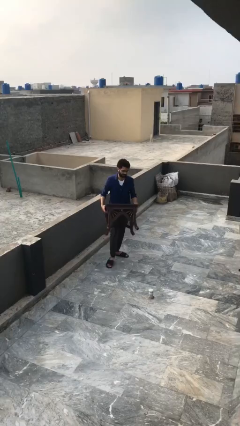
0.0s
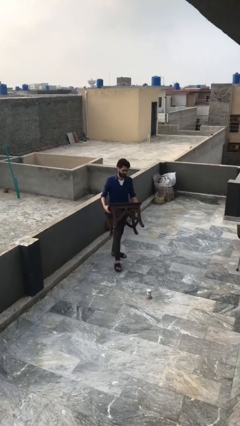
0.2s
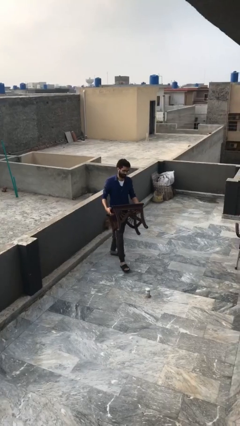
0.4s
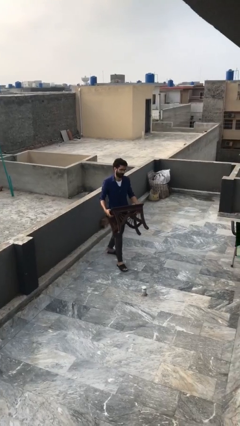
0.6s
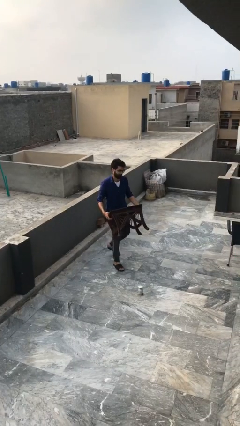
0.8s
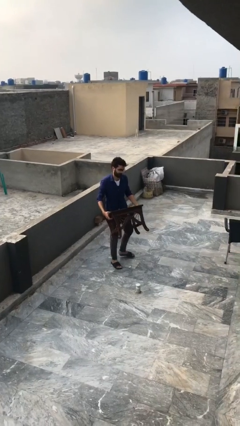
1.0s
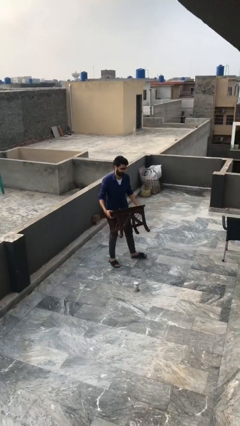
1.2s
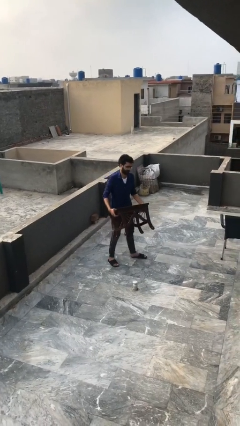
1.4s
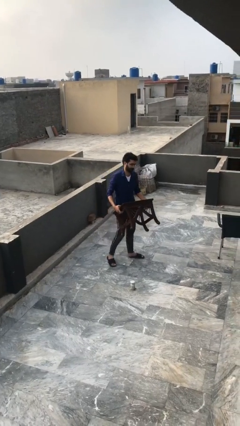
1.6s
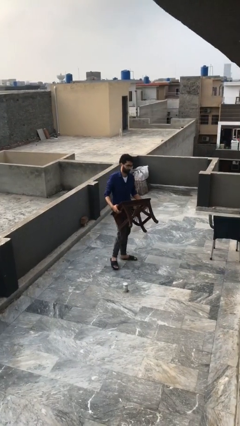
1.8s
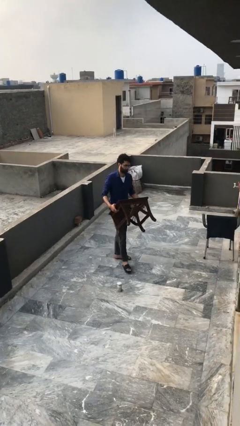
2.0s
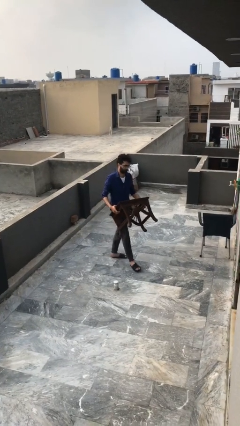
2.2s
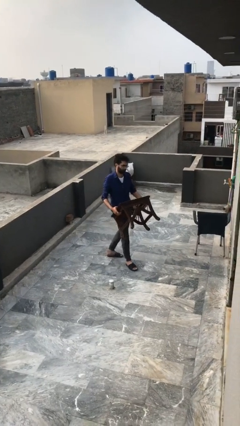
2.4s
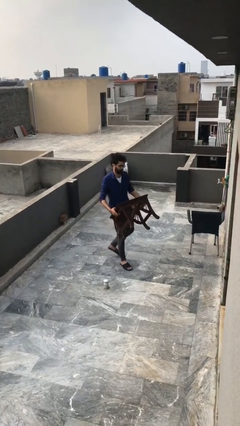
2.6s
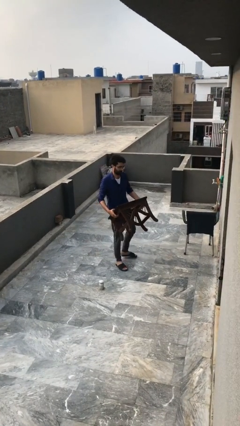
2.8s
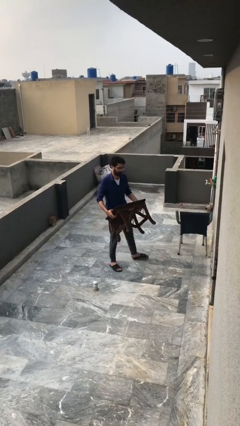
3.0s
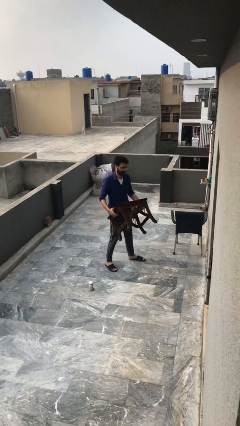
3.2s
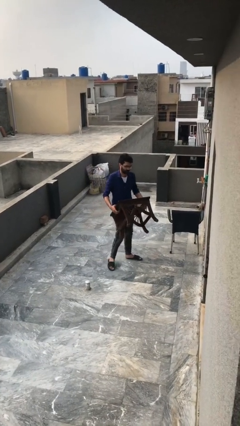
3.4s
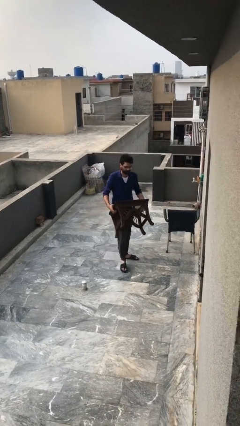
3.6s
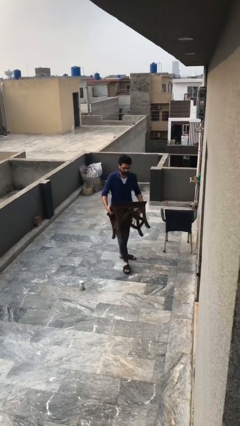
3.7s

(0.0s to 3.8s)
person carries heavy object

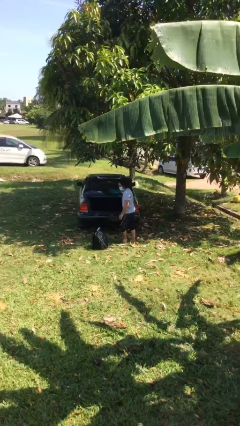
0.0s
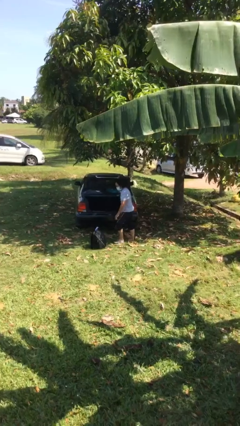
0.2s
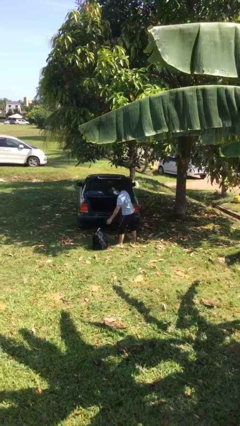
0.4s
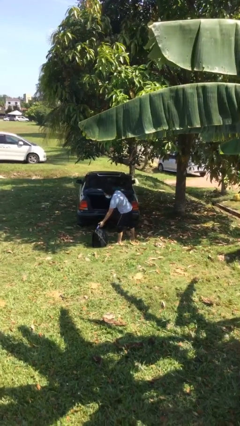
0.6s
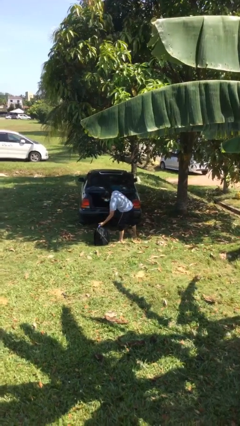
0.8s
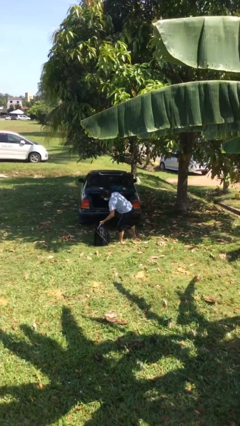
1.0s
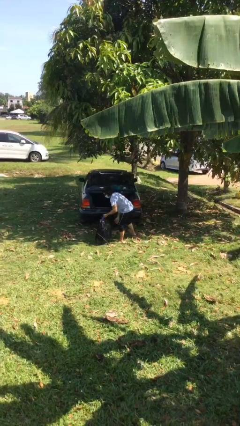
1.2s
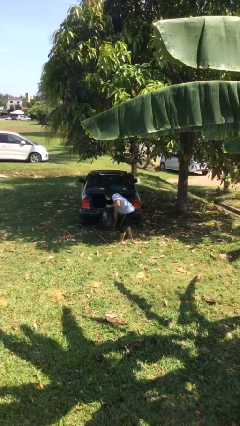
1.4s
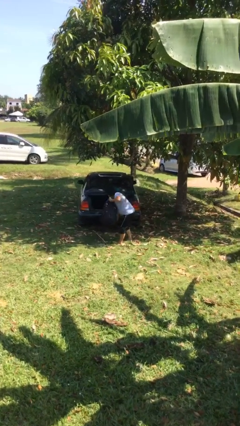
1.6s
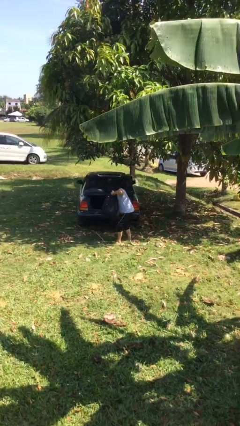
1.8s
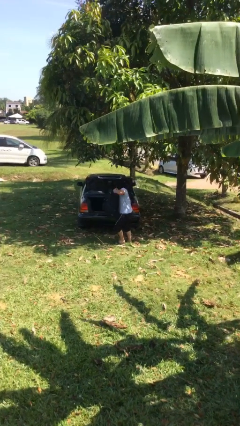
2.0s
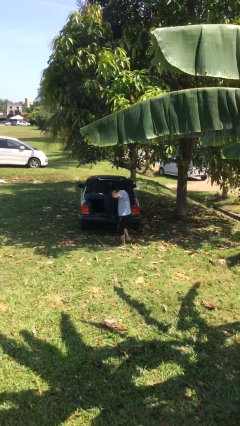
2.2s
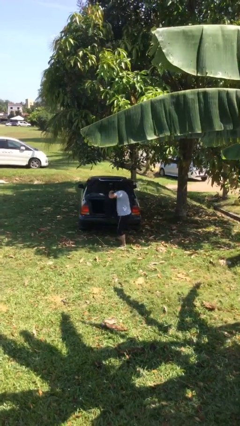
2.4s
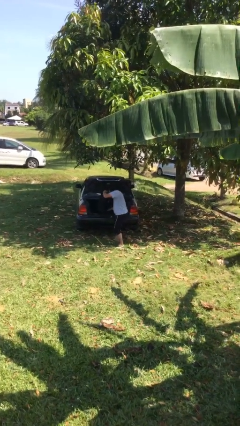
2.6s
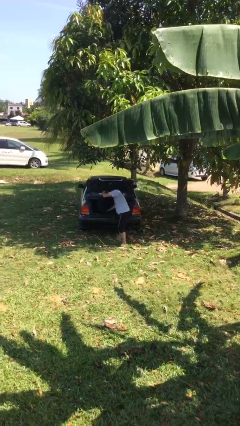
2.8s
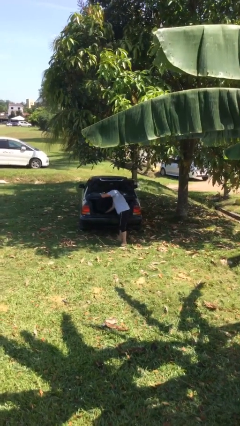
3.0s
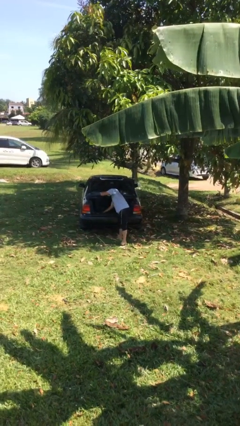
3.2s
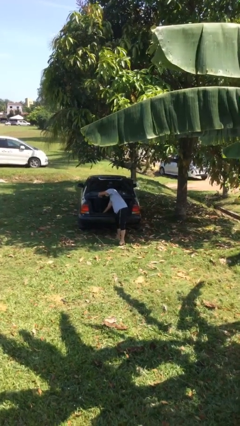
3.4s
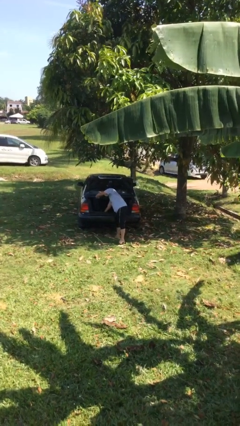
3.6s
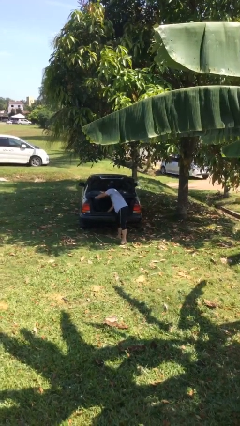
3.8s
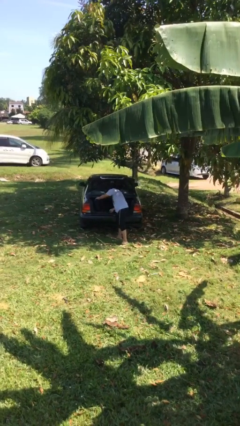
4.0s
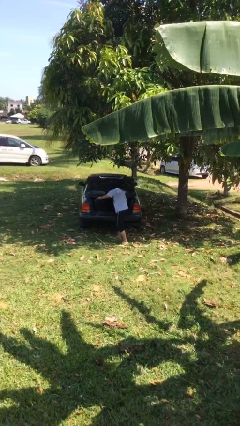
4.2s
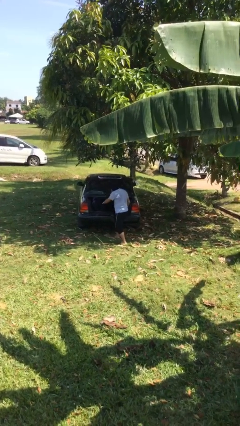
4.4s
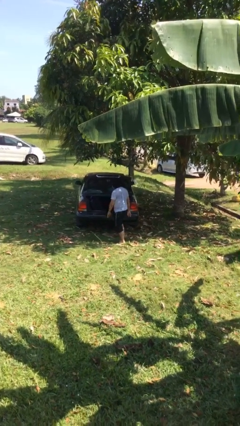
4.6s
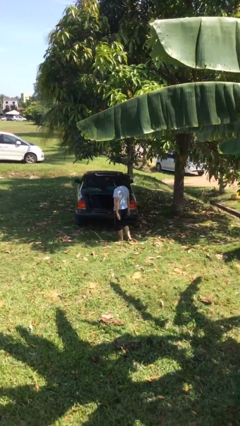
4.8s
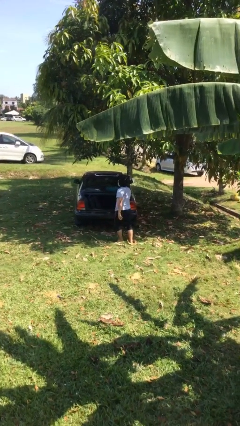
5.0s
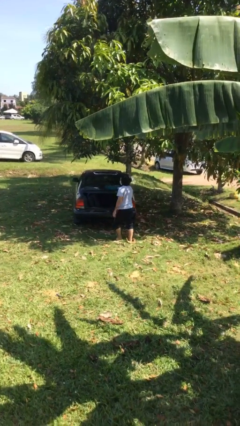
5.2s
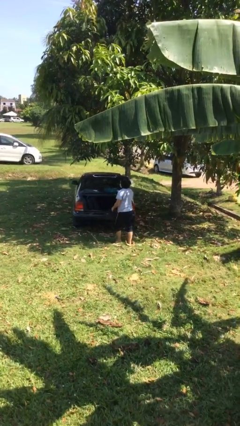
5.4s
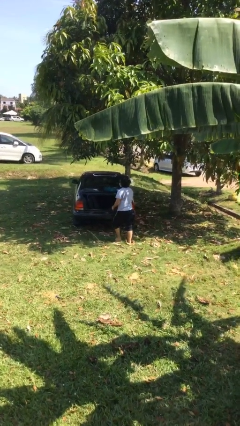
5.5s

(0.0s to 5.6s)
person loads car

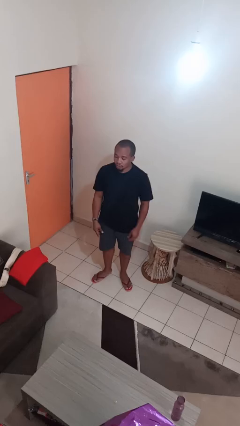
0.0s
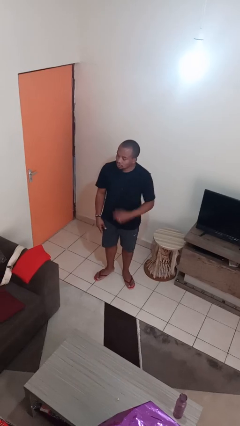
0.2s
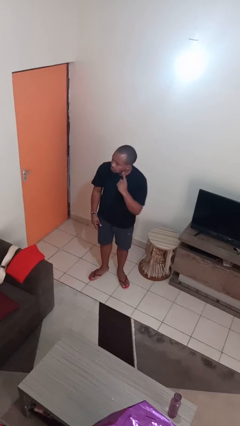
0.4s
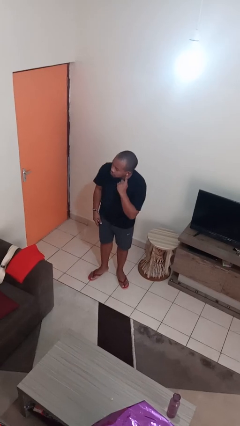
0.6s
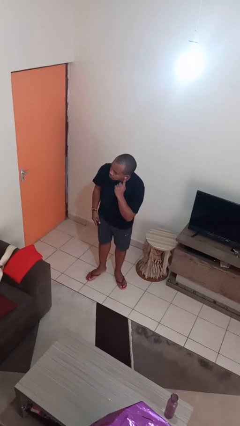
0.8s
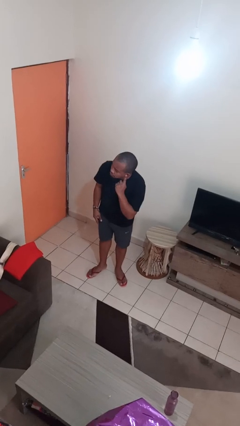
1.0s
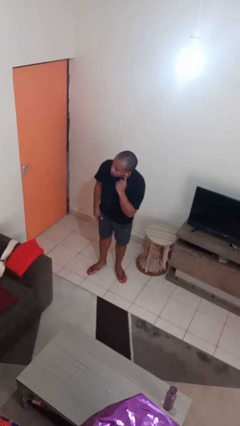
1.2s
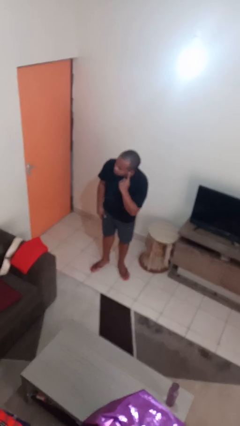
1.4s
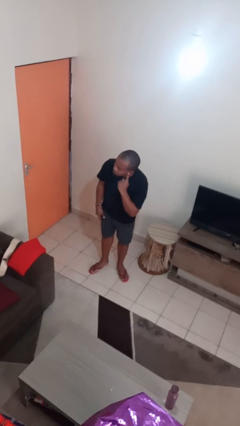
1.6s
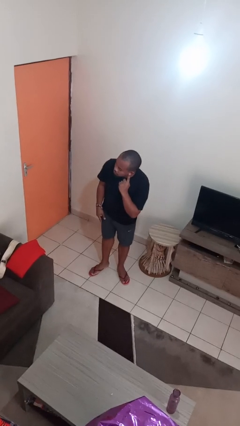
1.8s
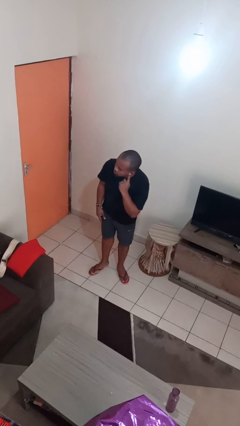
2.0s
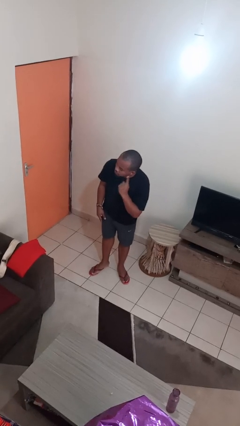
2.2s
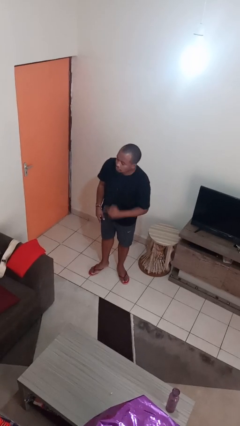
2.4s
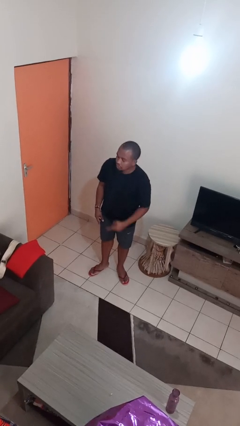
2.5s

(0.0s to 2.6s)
person gestures listen closely

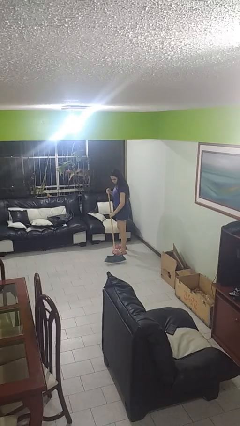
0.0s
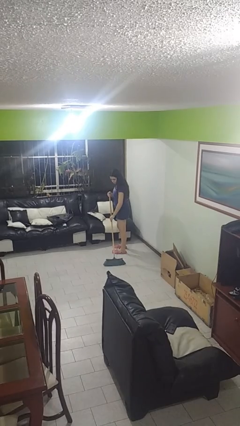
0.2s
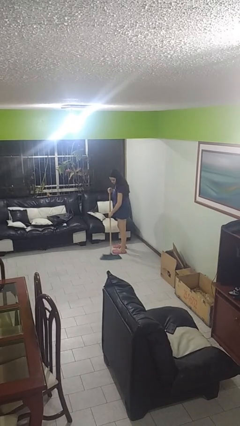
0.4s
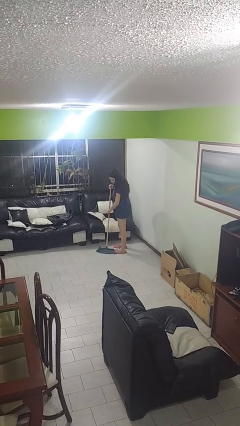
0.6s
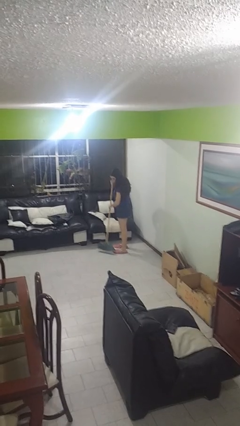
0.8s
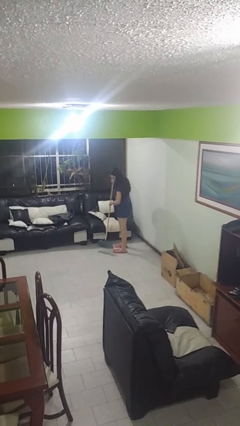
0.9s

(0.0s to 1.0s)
person sweeps floor

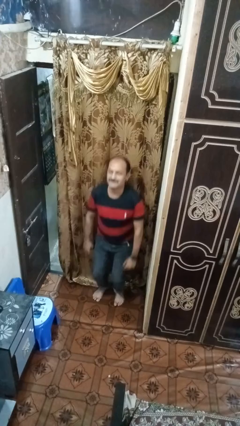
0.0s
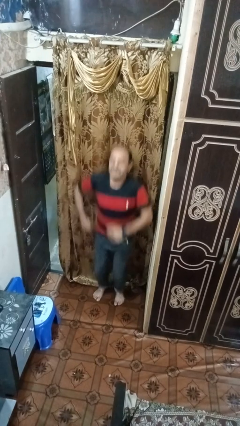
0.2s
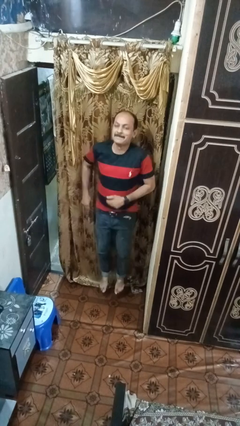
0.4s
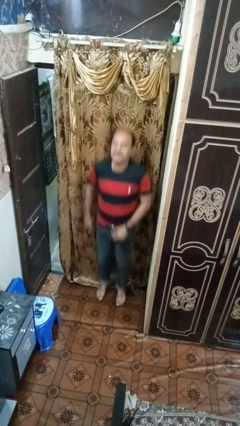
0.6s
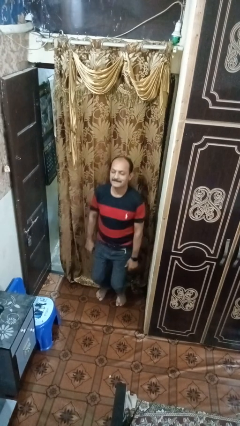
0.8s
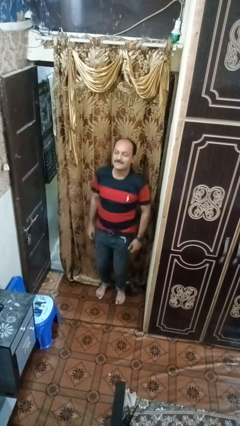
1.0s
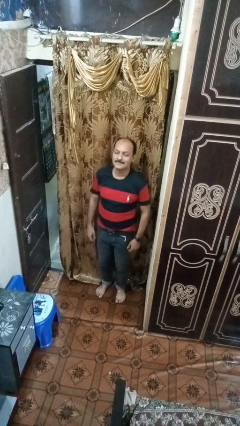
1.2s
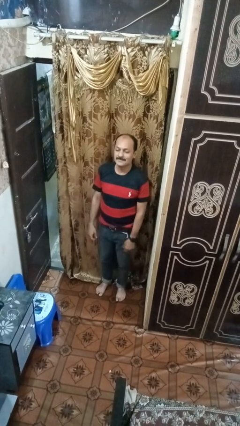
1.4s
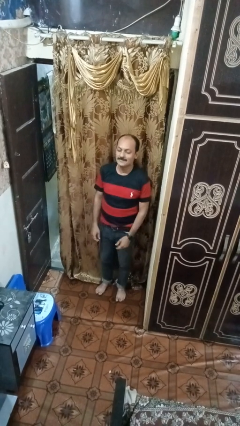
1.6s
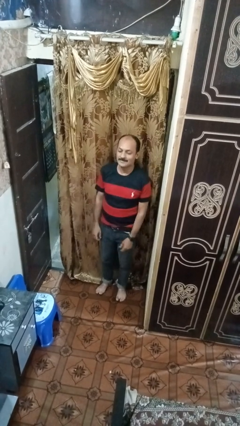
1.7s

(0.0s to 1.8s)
person jumps

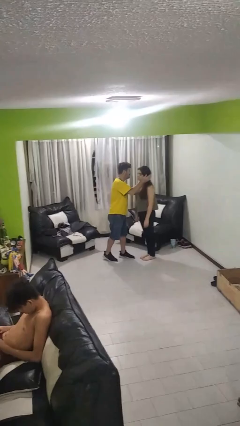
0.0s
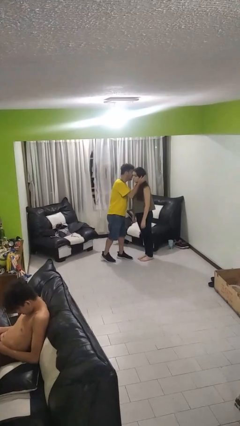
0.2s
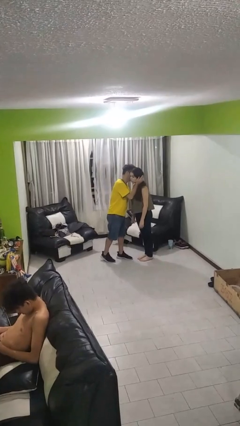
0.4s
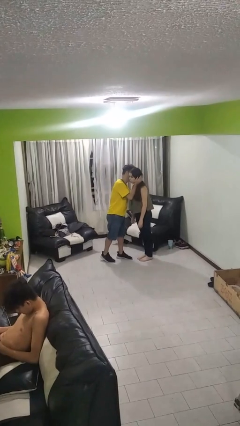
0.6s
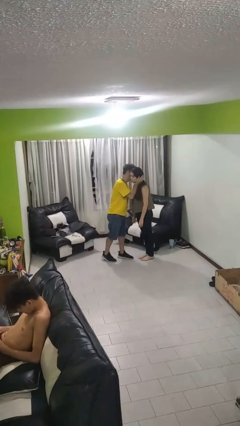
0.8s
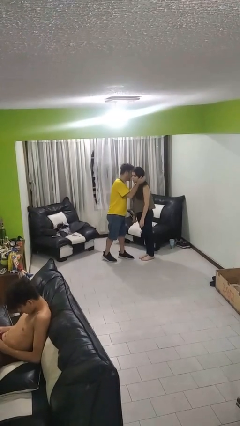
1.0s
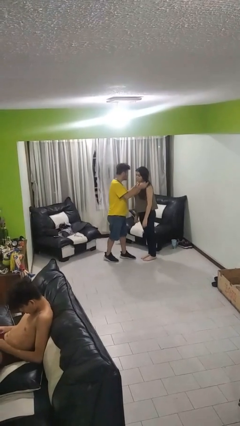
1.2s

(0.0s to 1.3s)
person kisses cheek of person

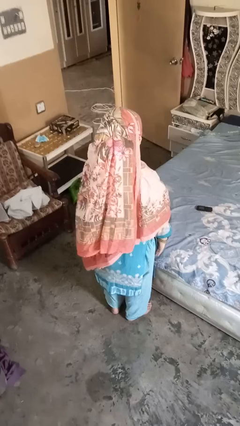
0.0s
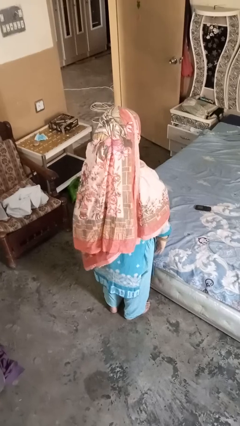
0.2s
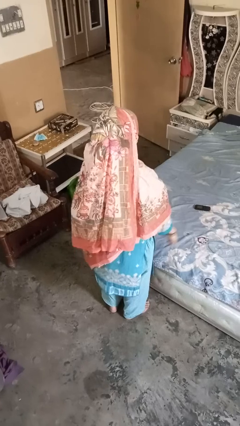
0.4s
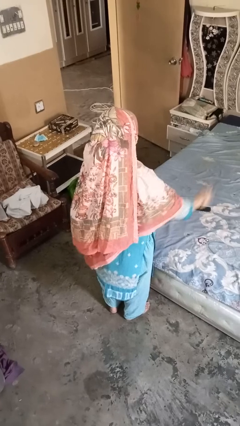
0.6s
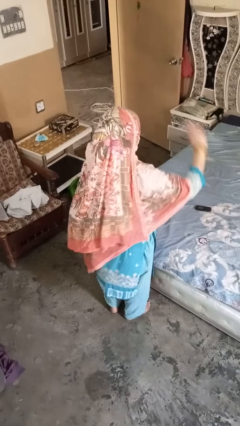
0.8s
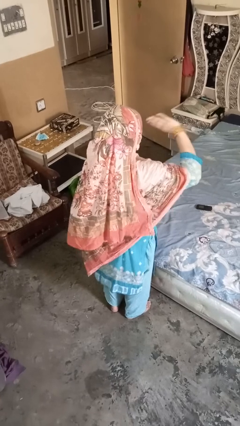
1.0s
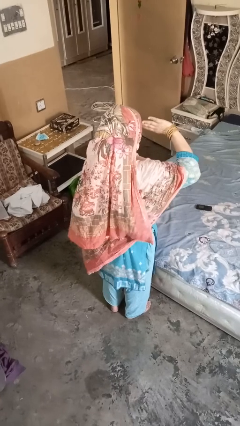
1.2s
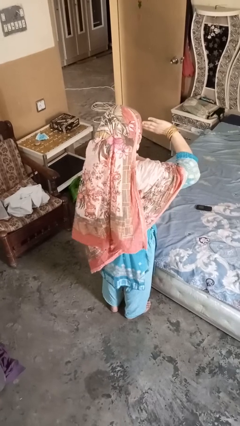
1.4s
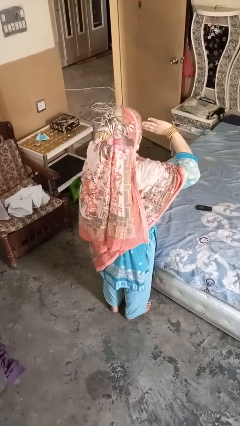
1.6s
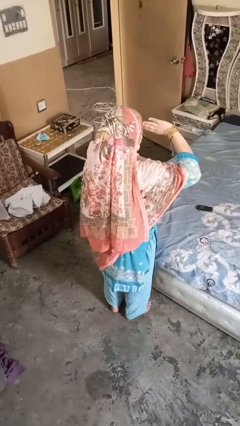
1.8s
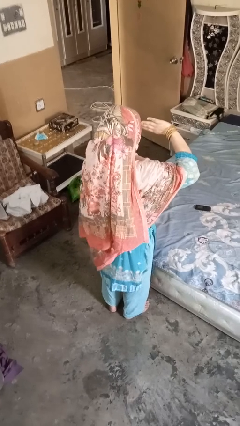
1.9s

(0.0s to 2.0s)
person salutes
